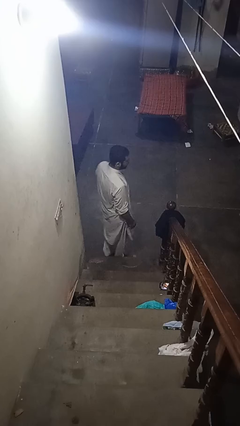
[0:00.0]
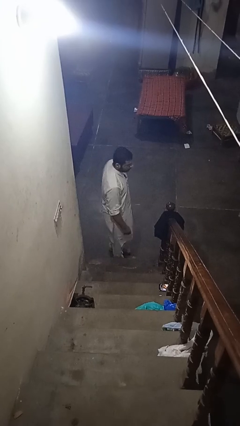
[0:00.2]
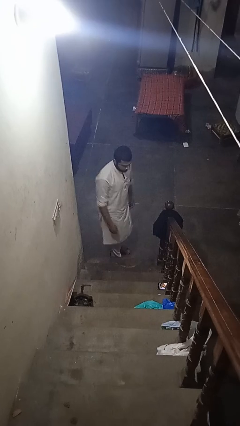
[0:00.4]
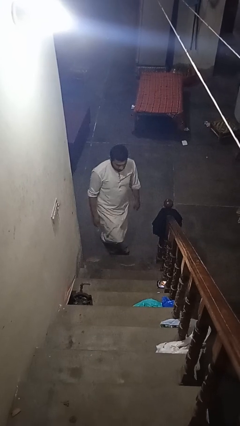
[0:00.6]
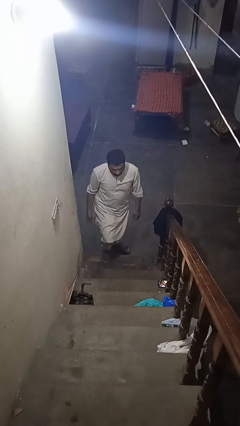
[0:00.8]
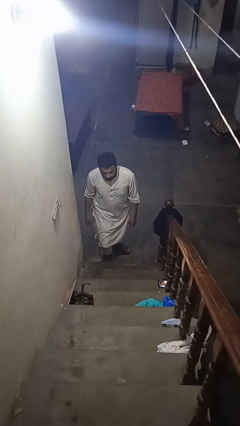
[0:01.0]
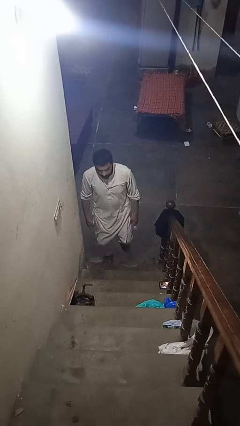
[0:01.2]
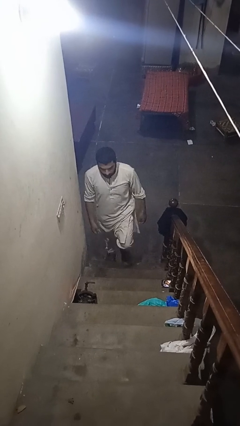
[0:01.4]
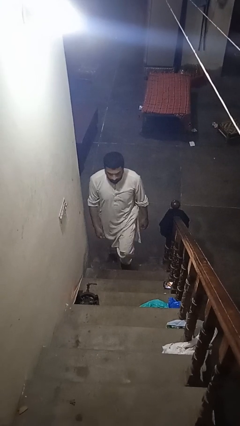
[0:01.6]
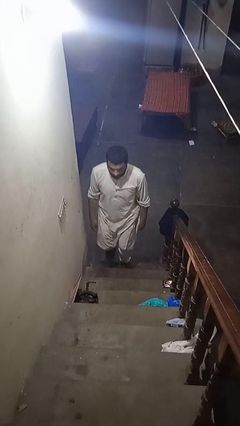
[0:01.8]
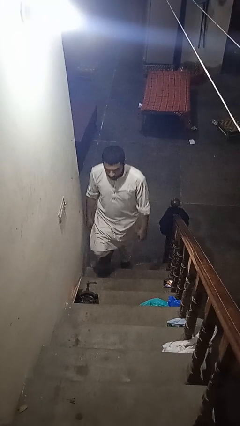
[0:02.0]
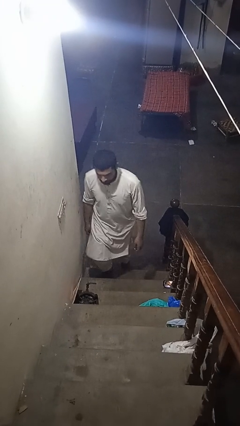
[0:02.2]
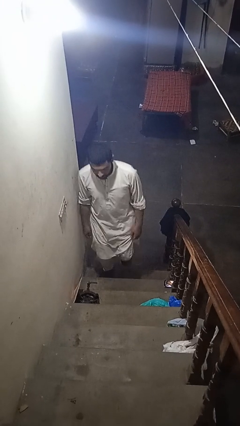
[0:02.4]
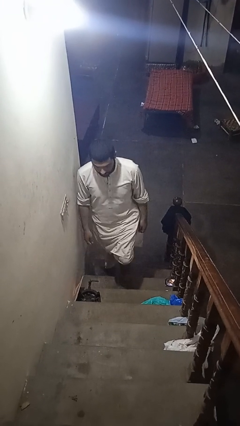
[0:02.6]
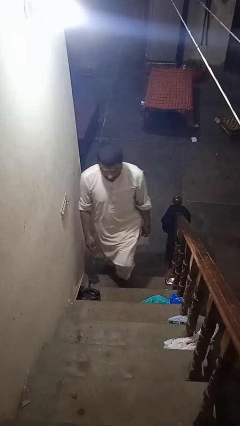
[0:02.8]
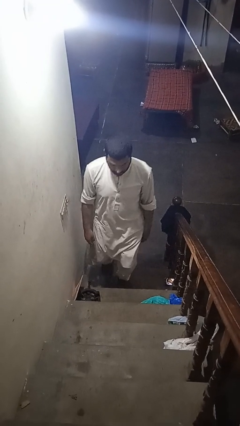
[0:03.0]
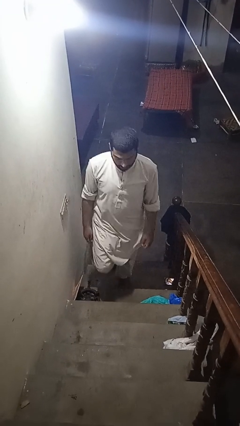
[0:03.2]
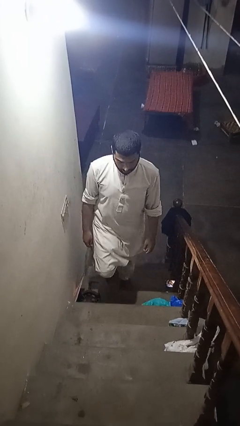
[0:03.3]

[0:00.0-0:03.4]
person climbs up stairs

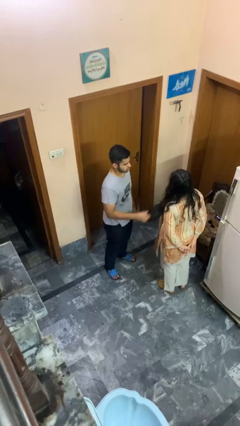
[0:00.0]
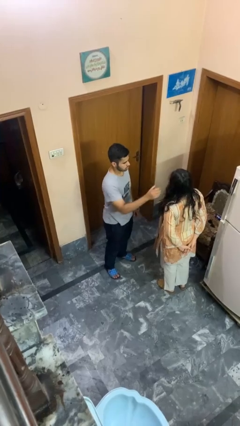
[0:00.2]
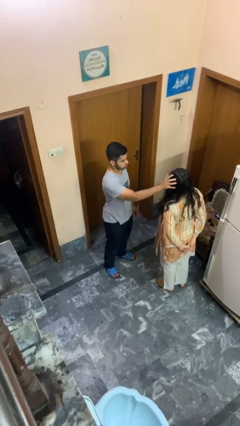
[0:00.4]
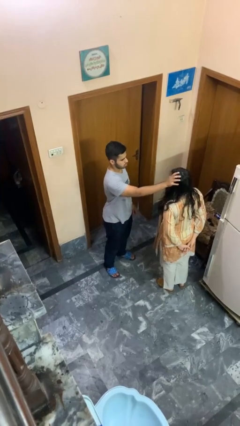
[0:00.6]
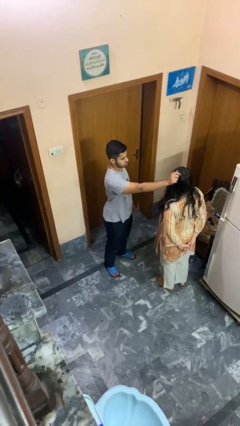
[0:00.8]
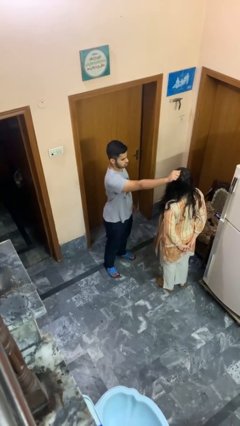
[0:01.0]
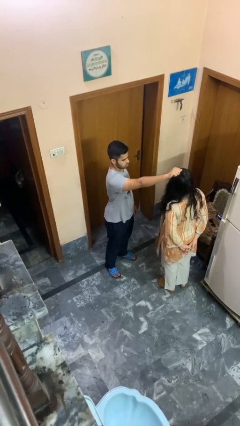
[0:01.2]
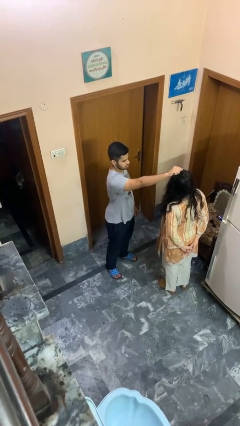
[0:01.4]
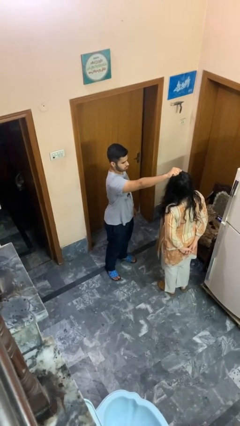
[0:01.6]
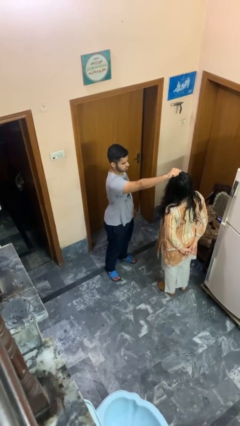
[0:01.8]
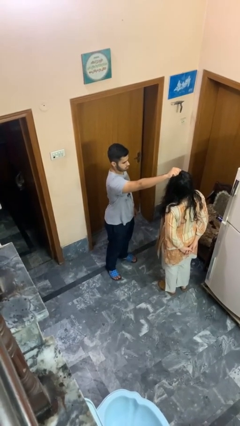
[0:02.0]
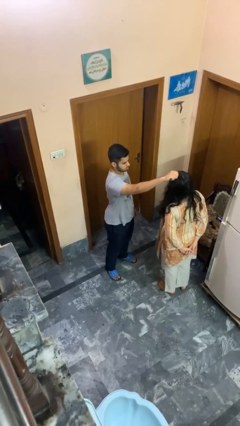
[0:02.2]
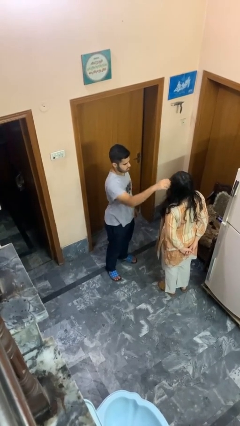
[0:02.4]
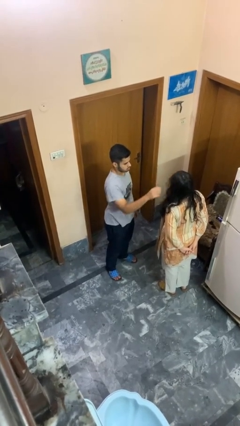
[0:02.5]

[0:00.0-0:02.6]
person grabs person by hair

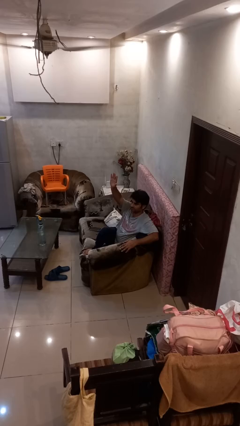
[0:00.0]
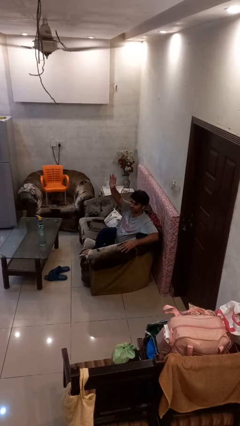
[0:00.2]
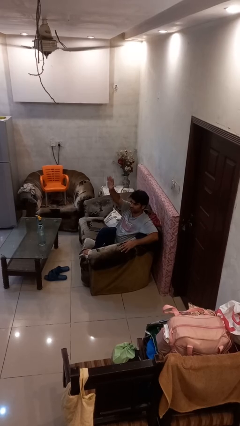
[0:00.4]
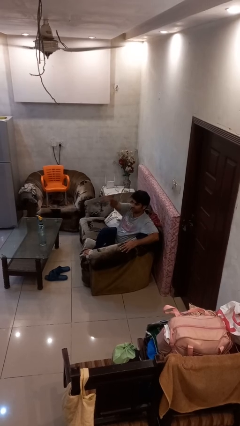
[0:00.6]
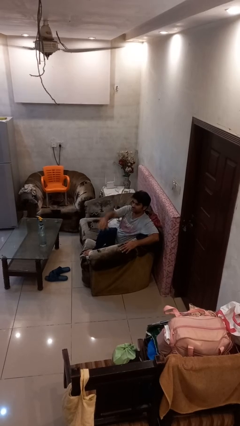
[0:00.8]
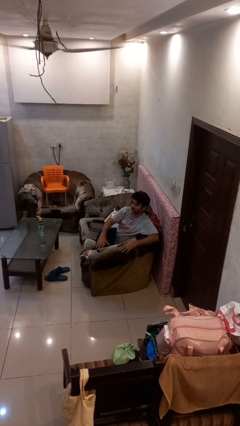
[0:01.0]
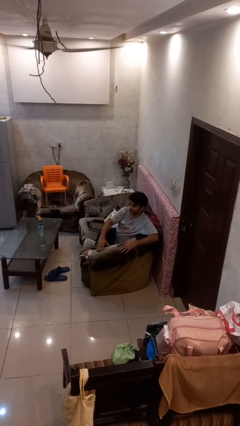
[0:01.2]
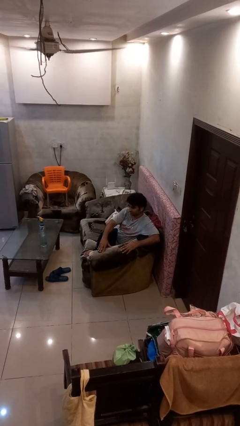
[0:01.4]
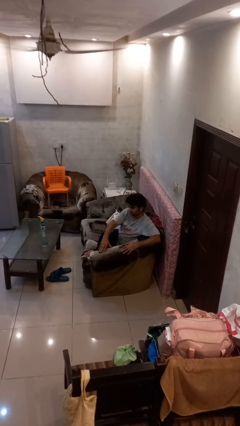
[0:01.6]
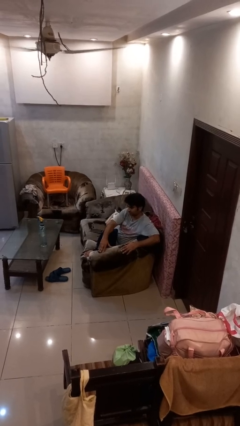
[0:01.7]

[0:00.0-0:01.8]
person gestures lower hand

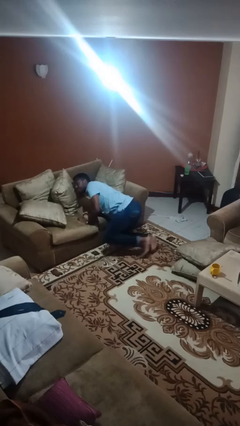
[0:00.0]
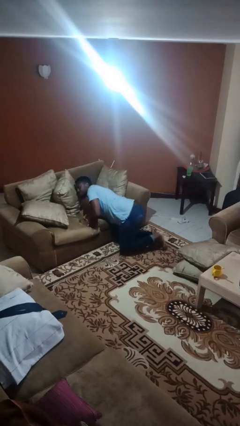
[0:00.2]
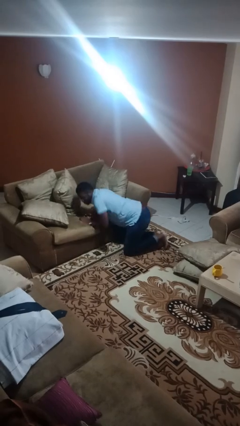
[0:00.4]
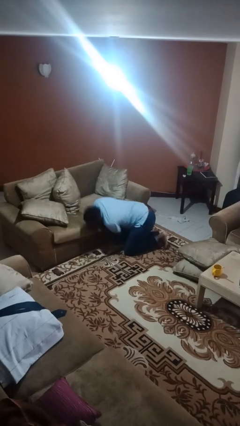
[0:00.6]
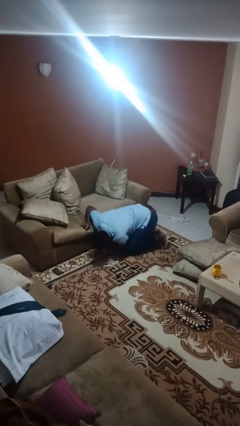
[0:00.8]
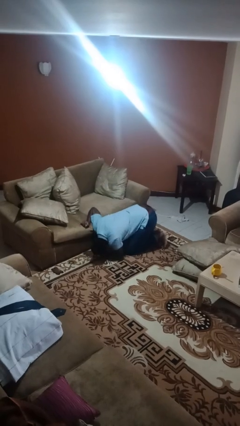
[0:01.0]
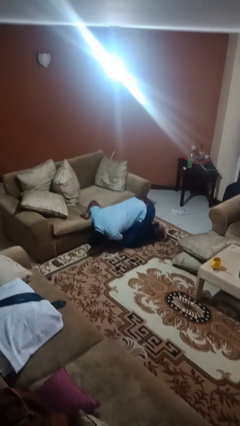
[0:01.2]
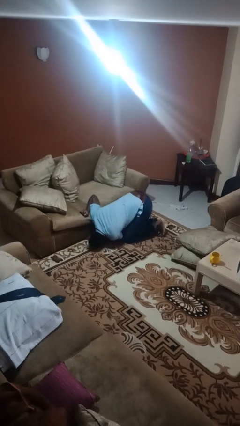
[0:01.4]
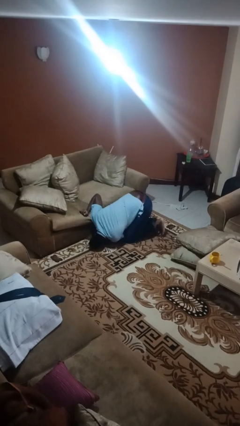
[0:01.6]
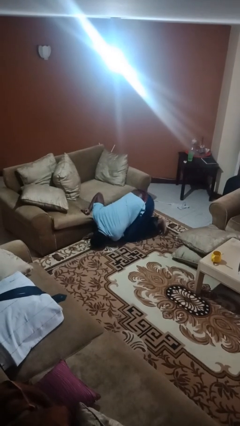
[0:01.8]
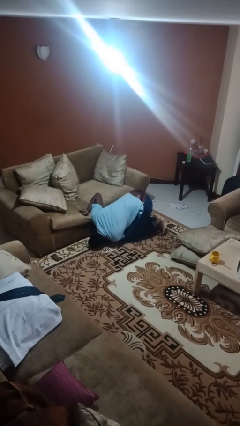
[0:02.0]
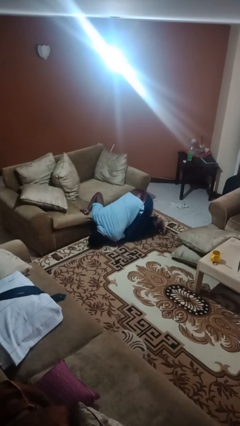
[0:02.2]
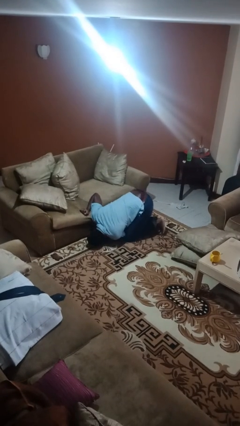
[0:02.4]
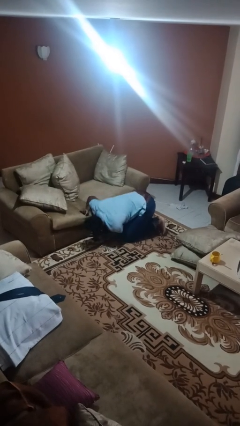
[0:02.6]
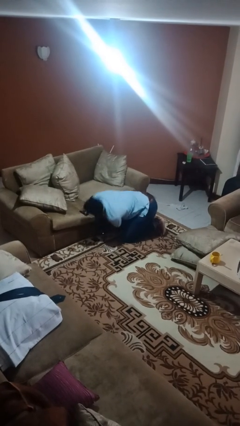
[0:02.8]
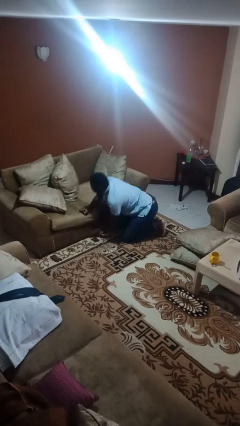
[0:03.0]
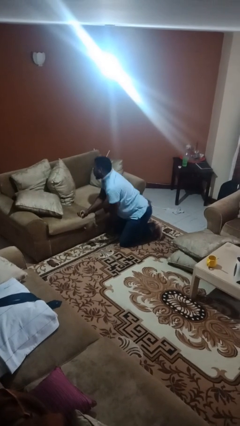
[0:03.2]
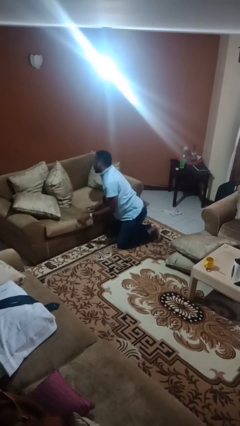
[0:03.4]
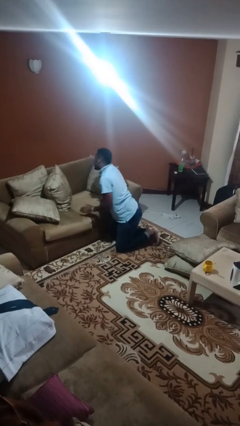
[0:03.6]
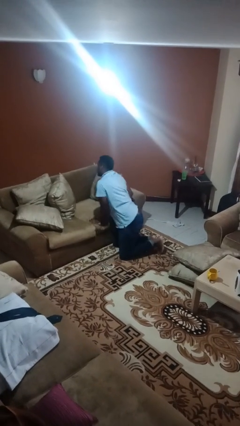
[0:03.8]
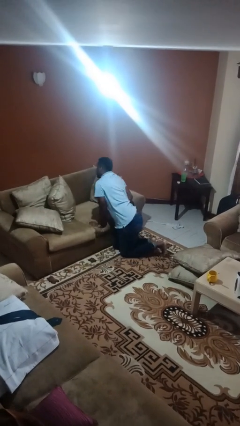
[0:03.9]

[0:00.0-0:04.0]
person searches under couch

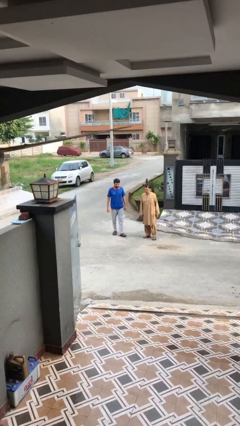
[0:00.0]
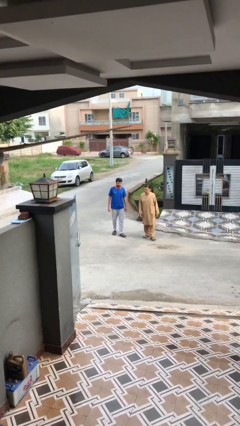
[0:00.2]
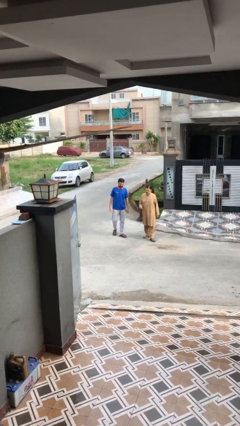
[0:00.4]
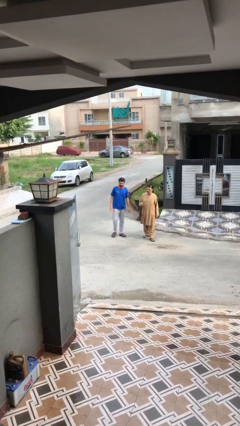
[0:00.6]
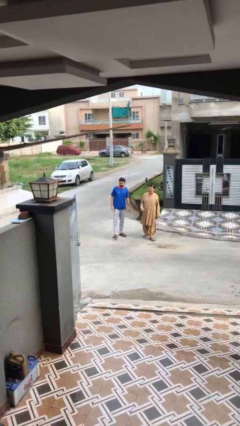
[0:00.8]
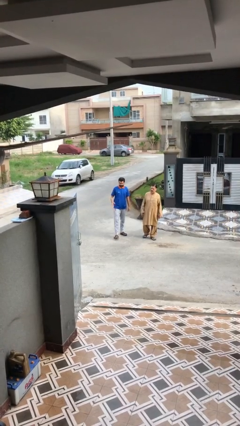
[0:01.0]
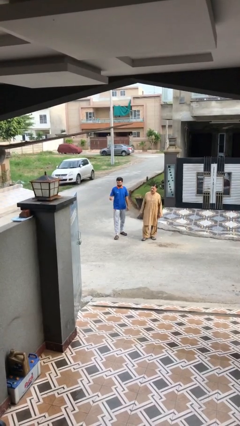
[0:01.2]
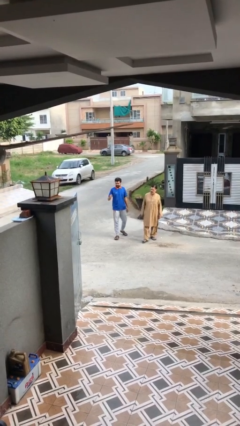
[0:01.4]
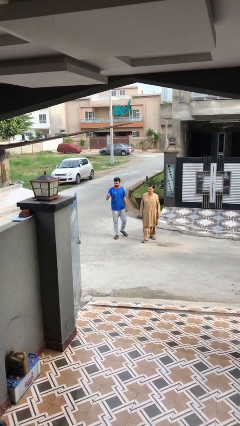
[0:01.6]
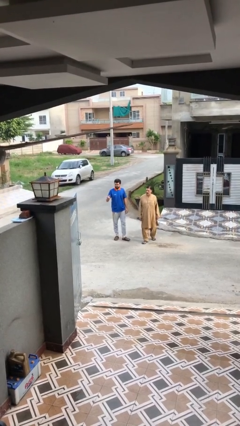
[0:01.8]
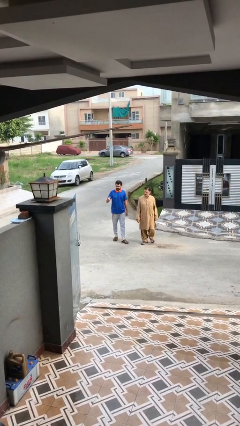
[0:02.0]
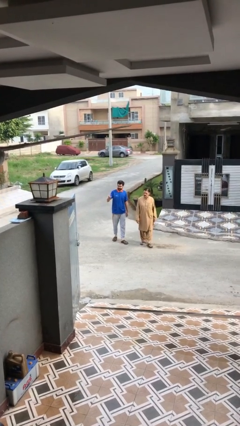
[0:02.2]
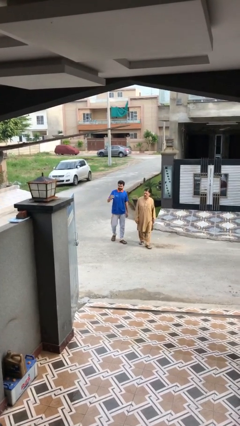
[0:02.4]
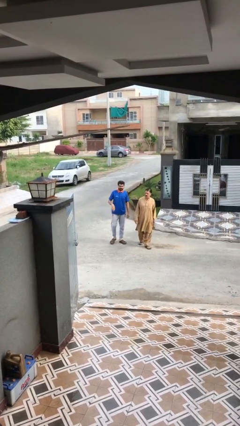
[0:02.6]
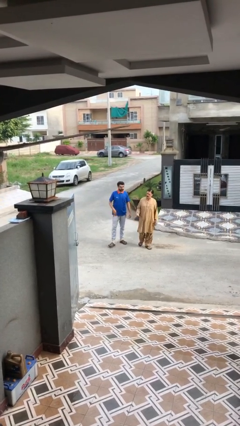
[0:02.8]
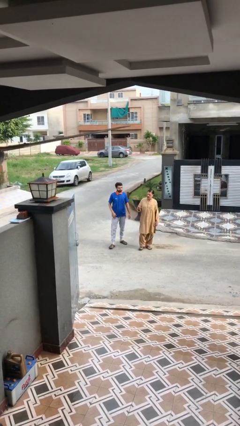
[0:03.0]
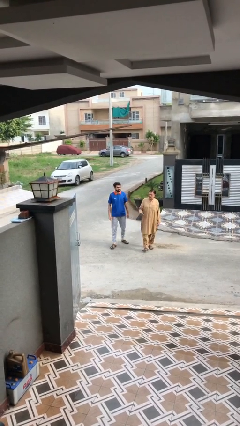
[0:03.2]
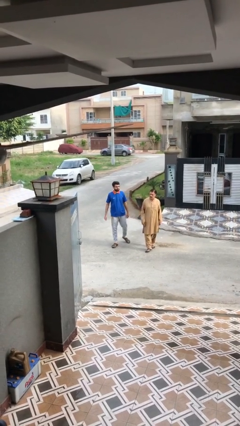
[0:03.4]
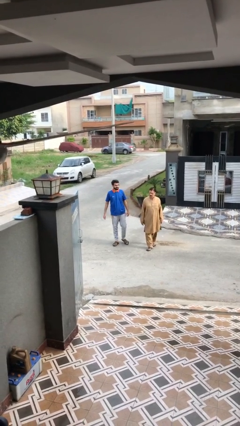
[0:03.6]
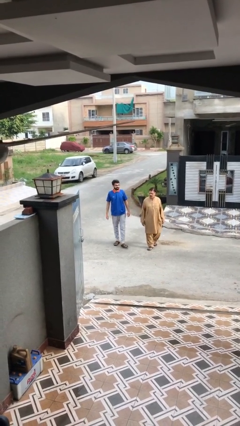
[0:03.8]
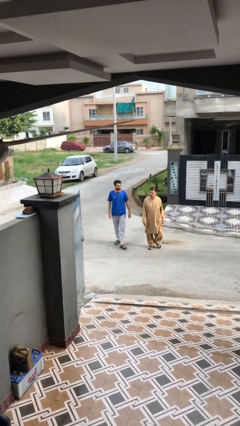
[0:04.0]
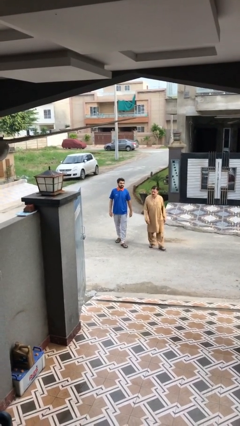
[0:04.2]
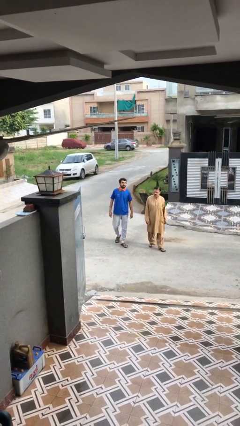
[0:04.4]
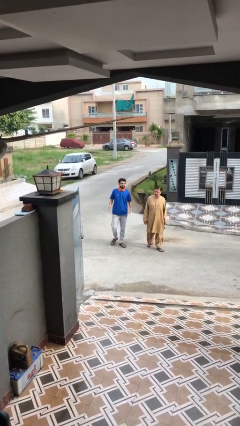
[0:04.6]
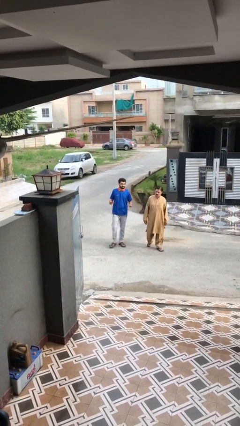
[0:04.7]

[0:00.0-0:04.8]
person talks to person

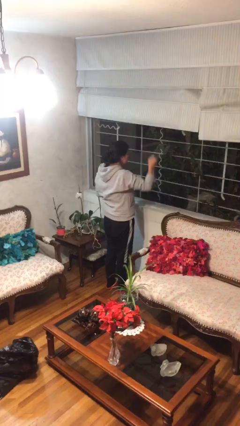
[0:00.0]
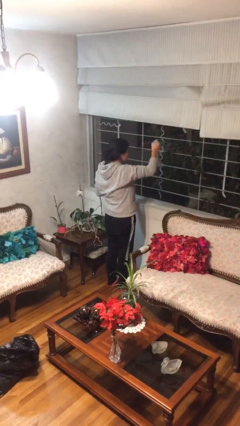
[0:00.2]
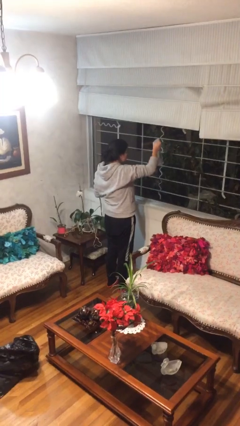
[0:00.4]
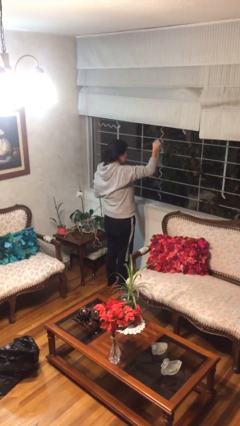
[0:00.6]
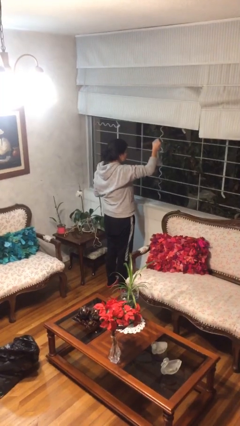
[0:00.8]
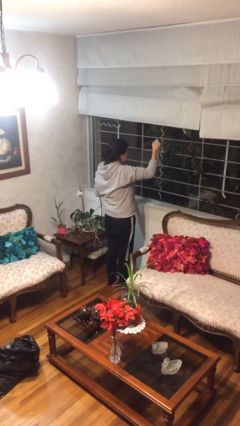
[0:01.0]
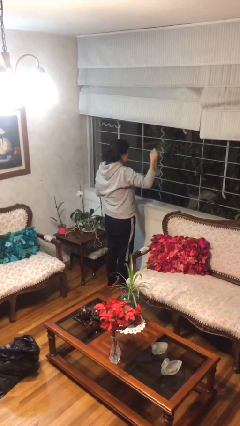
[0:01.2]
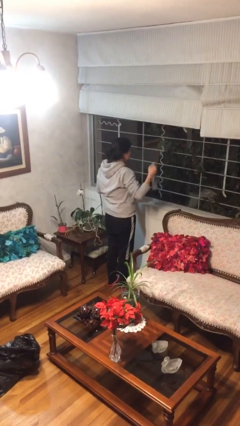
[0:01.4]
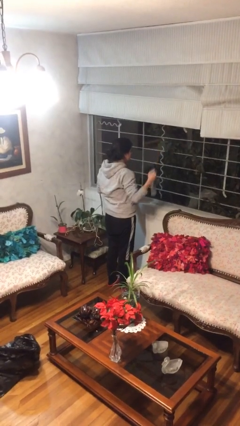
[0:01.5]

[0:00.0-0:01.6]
person sprays from bottle
